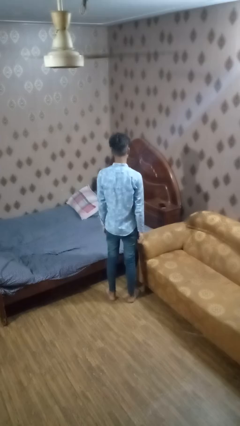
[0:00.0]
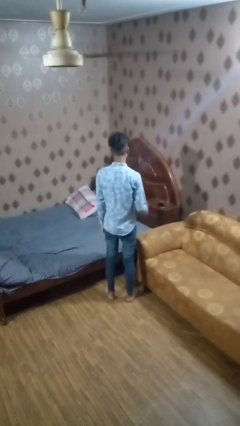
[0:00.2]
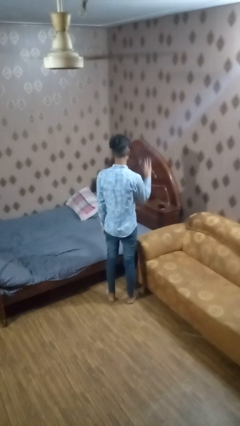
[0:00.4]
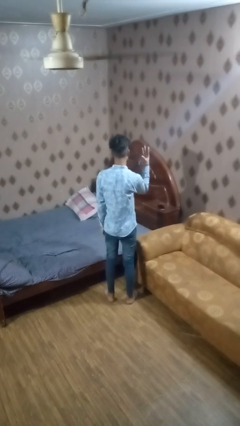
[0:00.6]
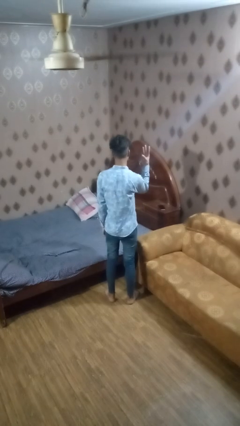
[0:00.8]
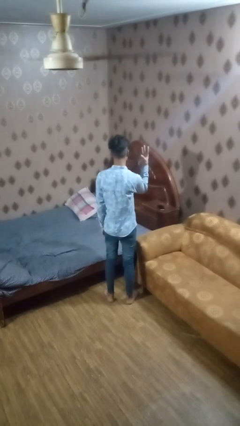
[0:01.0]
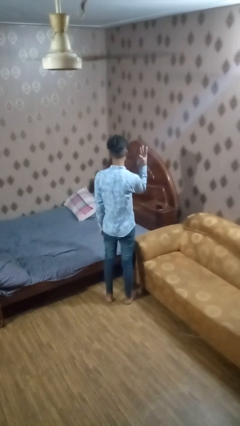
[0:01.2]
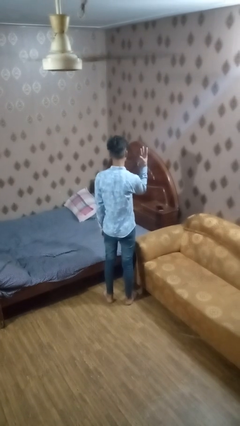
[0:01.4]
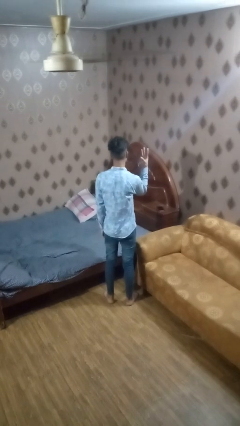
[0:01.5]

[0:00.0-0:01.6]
person gestures number three

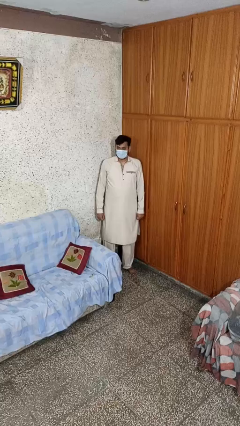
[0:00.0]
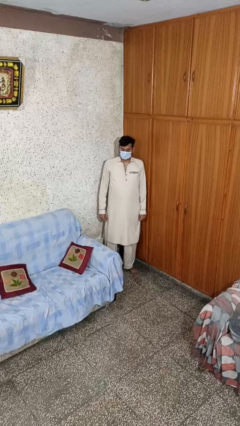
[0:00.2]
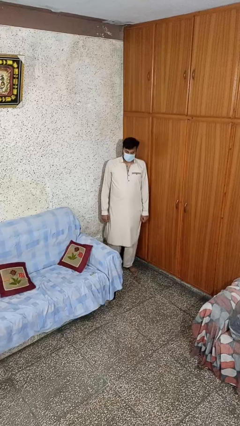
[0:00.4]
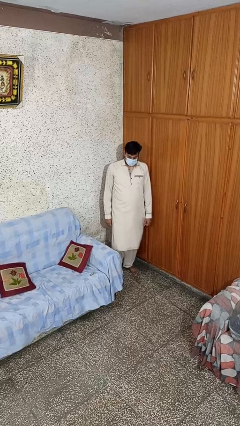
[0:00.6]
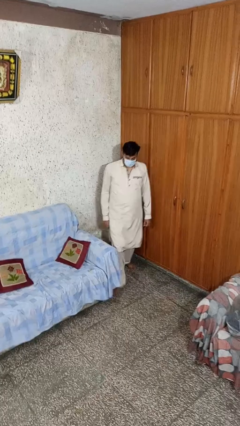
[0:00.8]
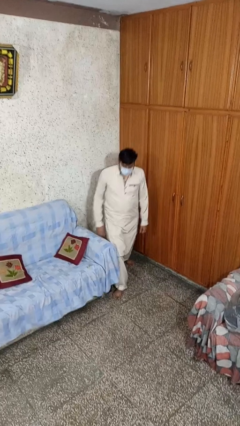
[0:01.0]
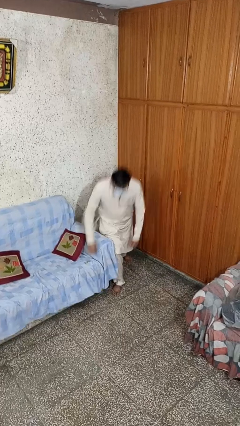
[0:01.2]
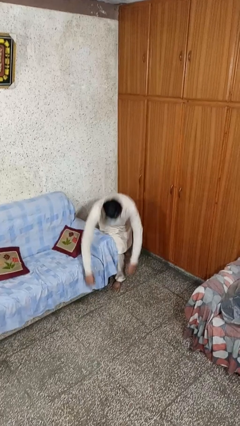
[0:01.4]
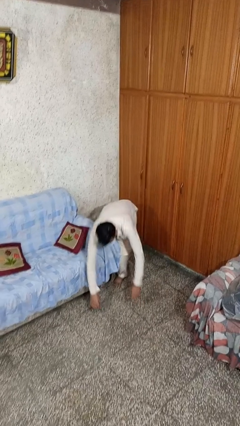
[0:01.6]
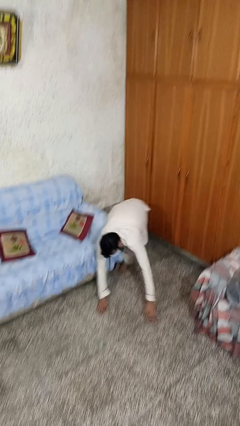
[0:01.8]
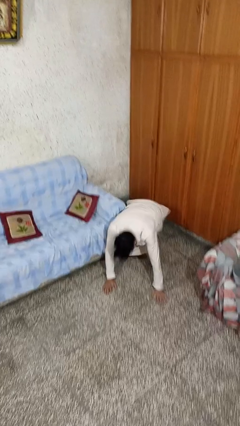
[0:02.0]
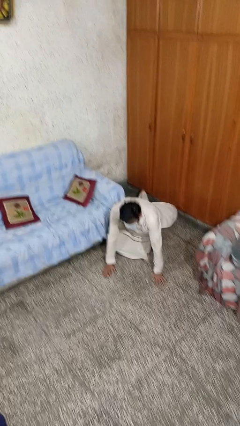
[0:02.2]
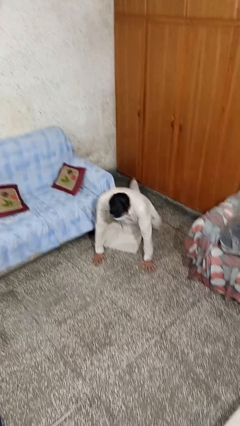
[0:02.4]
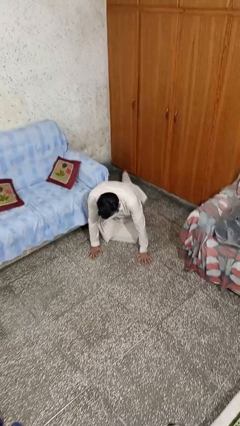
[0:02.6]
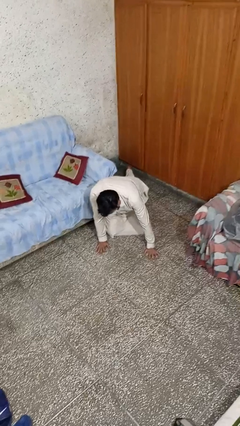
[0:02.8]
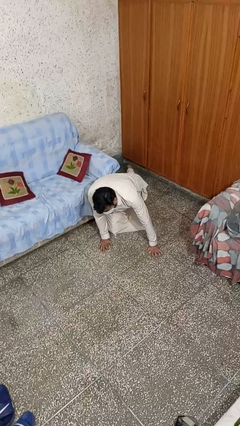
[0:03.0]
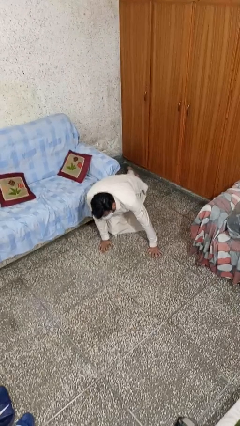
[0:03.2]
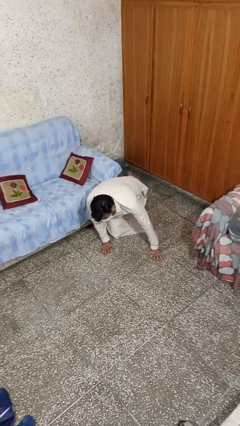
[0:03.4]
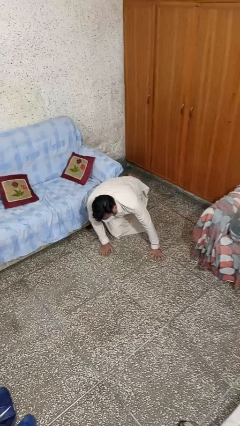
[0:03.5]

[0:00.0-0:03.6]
person trips on object on floor

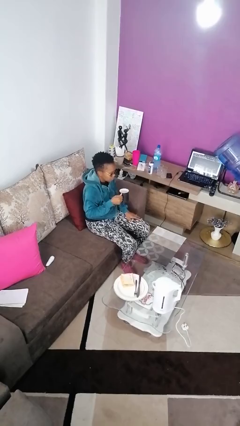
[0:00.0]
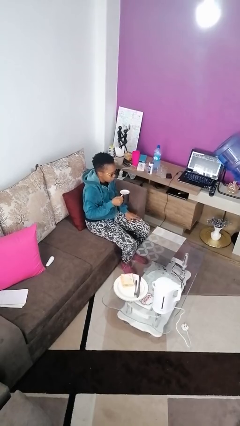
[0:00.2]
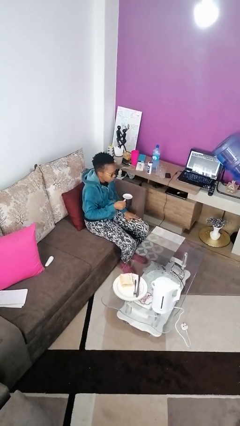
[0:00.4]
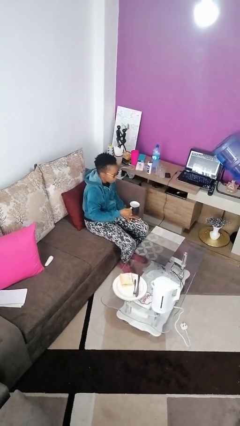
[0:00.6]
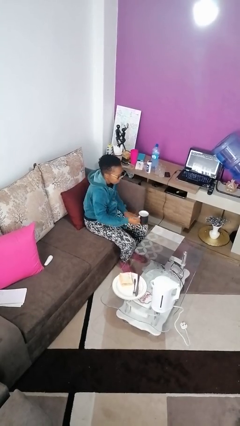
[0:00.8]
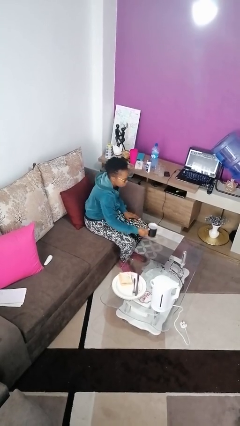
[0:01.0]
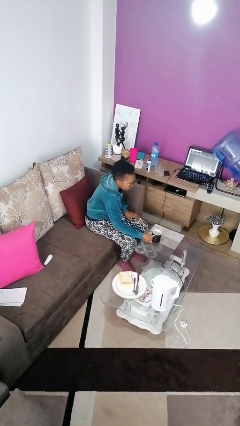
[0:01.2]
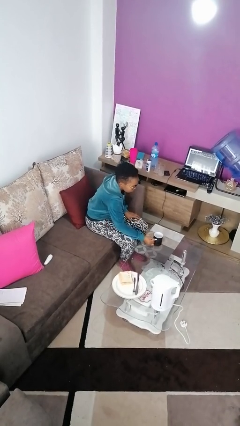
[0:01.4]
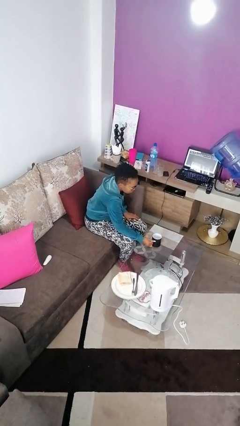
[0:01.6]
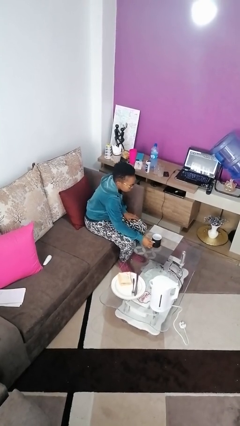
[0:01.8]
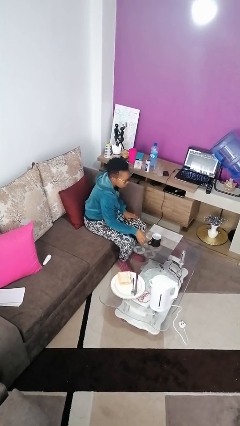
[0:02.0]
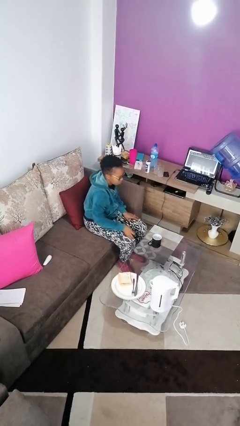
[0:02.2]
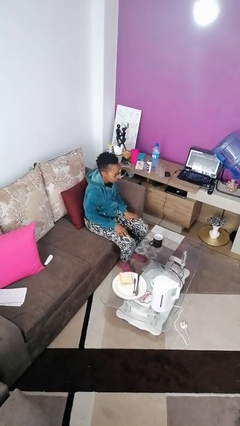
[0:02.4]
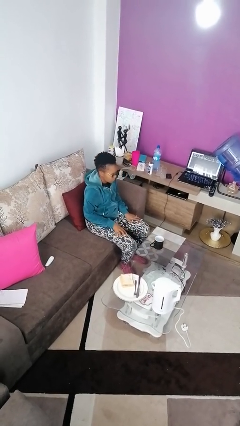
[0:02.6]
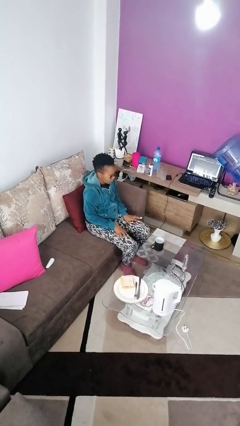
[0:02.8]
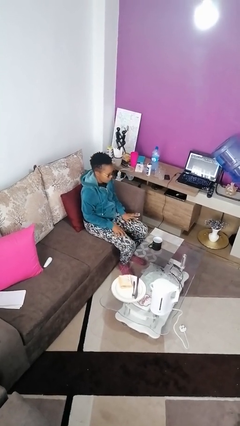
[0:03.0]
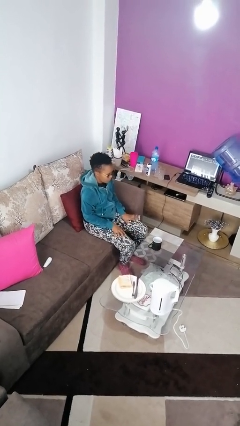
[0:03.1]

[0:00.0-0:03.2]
person puts down object on table

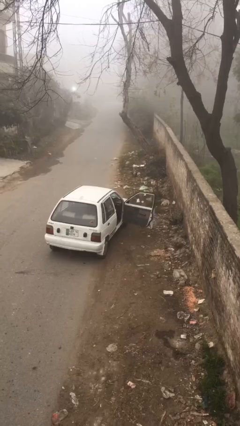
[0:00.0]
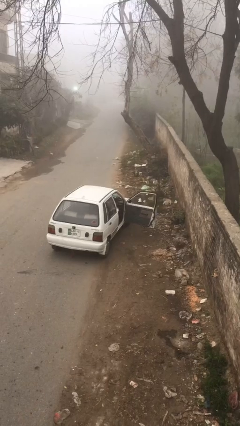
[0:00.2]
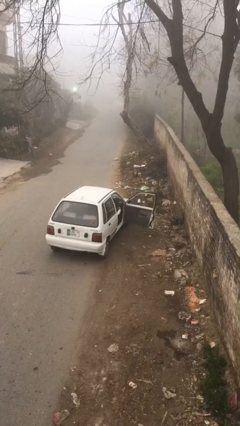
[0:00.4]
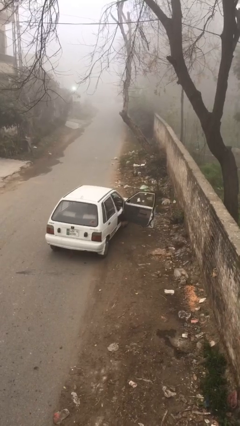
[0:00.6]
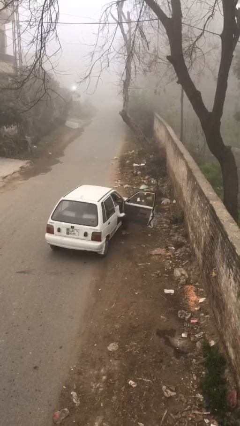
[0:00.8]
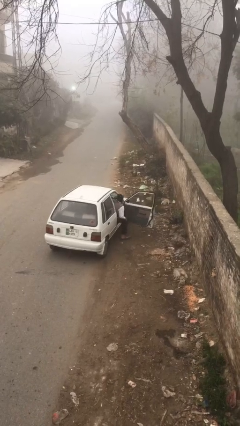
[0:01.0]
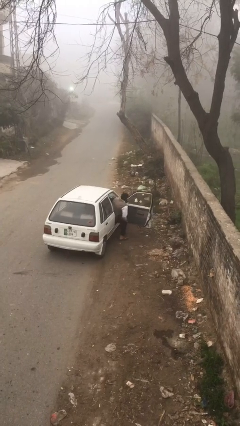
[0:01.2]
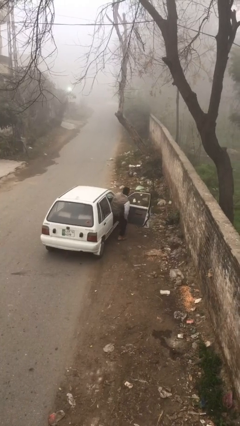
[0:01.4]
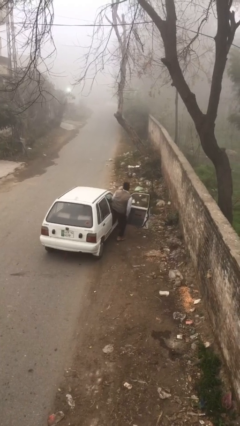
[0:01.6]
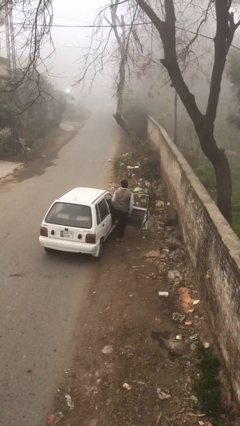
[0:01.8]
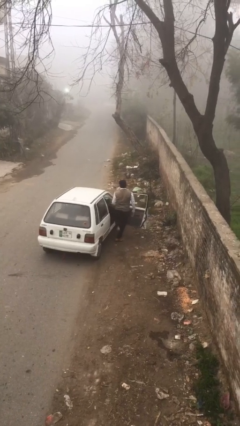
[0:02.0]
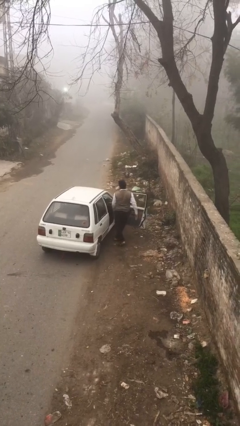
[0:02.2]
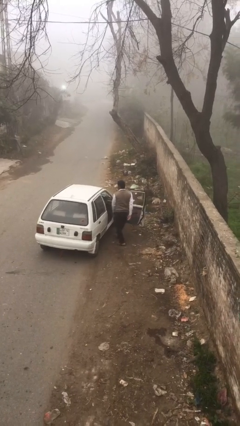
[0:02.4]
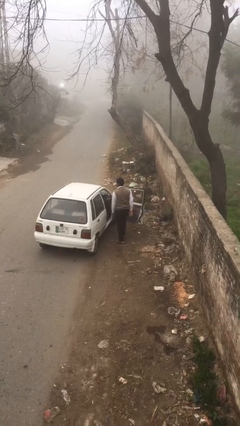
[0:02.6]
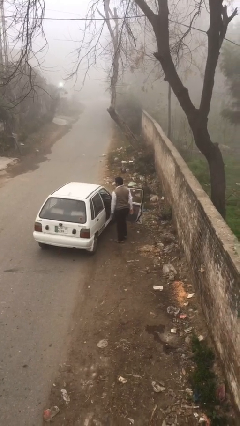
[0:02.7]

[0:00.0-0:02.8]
person exits car

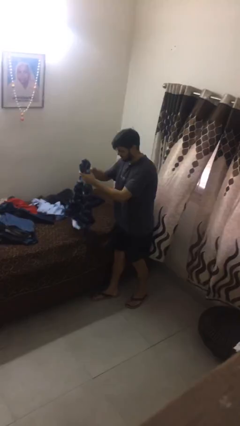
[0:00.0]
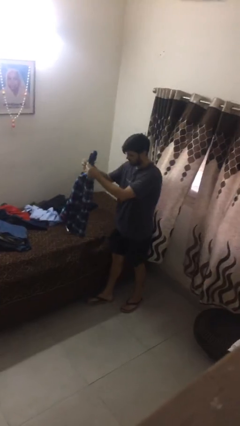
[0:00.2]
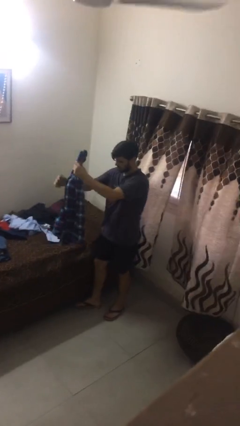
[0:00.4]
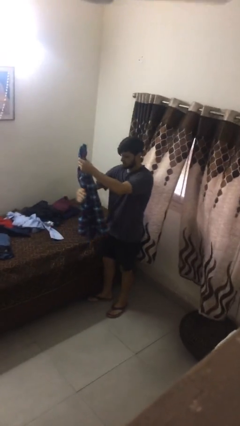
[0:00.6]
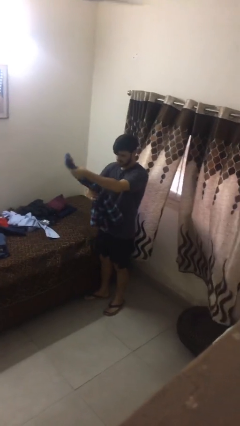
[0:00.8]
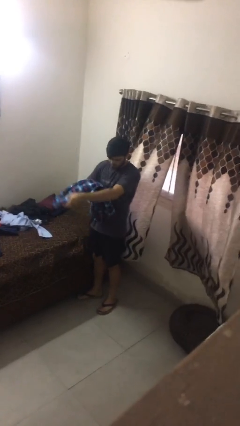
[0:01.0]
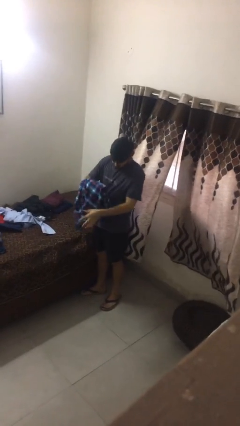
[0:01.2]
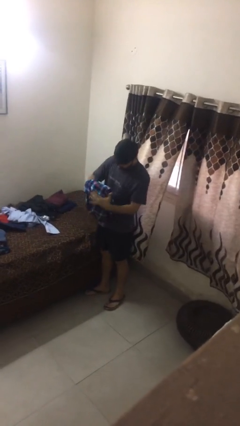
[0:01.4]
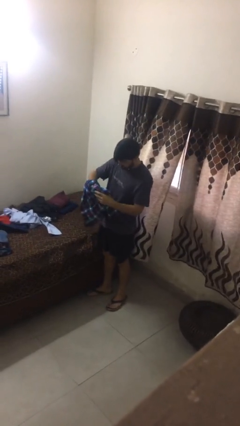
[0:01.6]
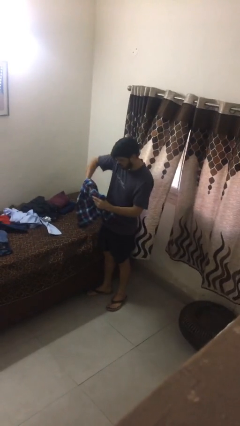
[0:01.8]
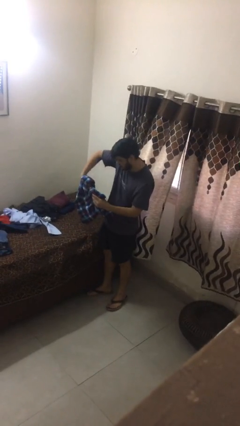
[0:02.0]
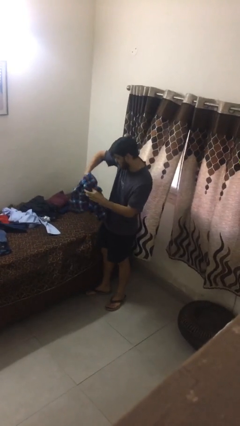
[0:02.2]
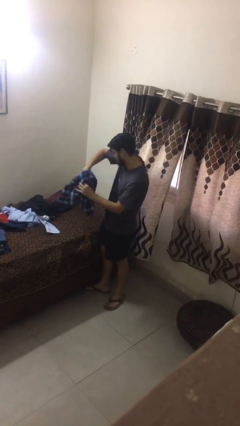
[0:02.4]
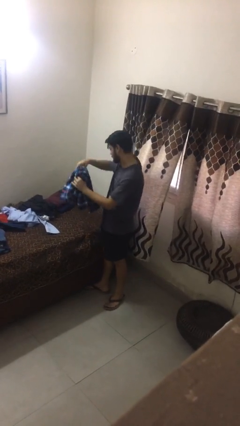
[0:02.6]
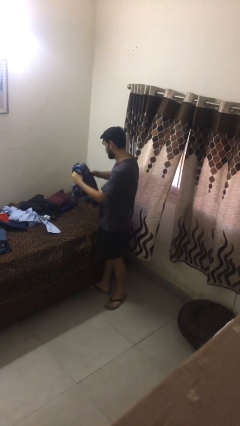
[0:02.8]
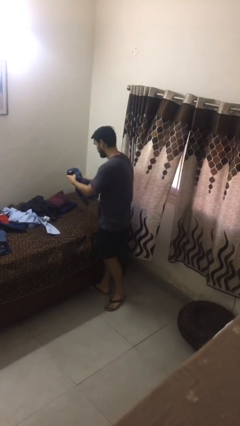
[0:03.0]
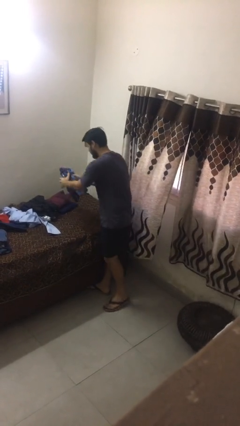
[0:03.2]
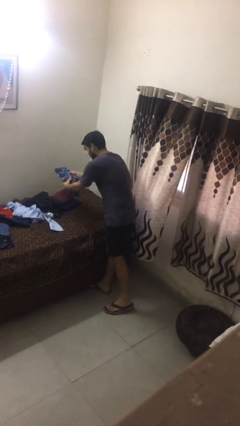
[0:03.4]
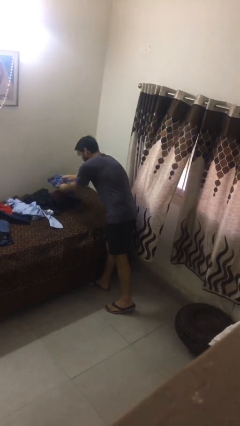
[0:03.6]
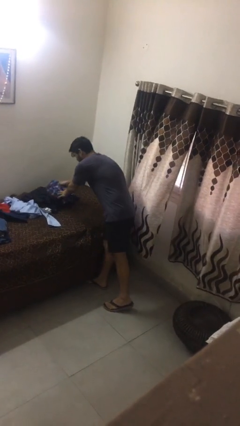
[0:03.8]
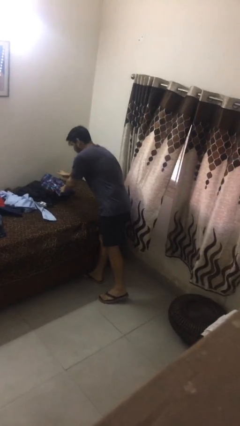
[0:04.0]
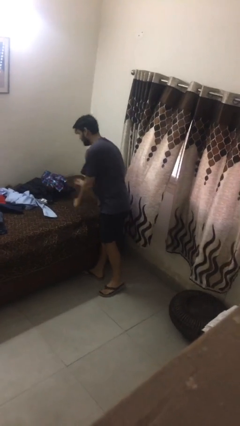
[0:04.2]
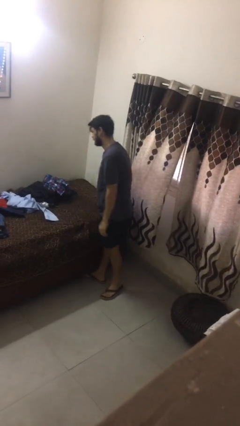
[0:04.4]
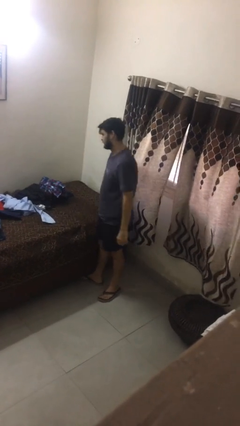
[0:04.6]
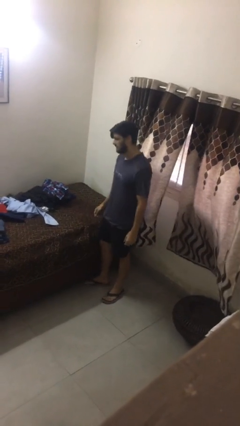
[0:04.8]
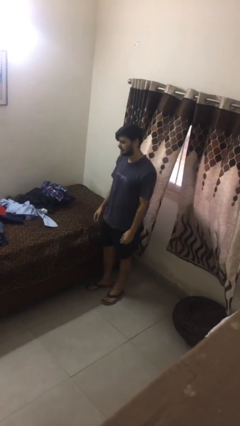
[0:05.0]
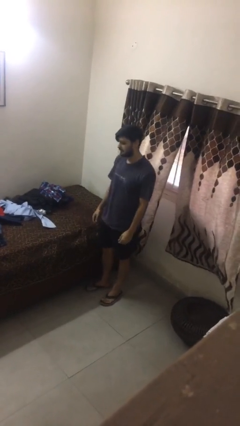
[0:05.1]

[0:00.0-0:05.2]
person folds shirt

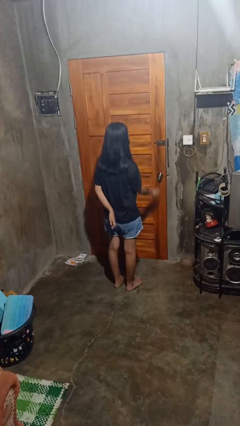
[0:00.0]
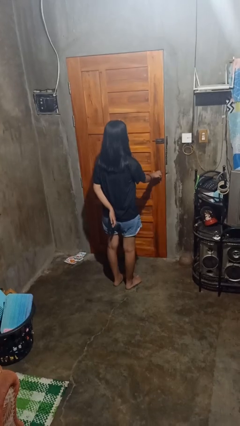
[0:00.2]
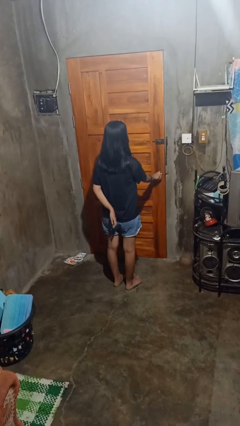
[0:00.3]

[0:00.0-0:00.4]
person opens facility door

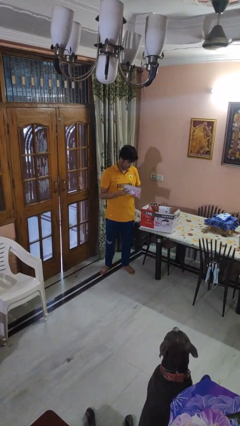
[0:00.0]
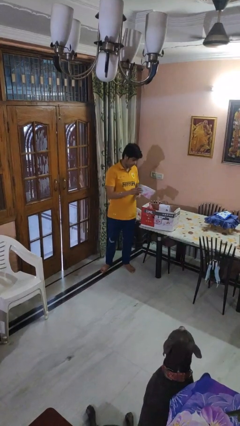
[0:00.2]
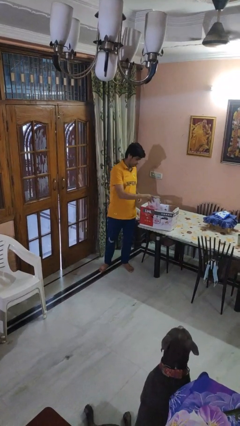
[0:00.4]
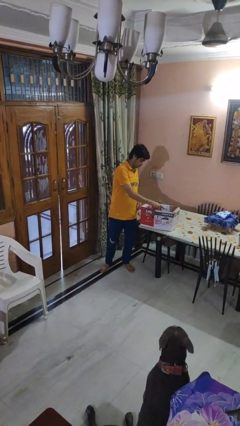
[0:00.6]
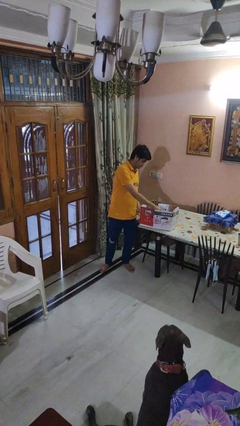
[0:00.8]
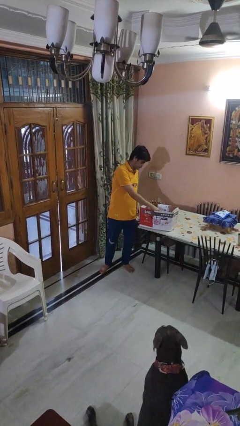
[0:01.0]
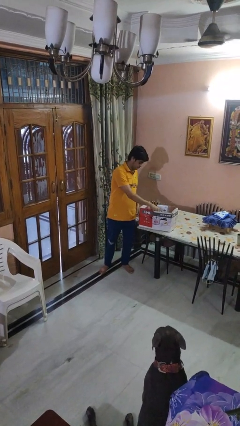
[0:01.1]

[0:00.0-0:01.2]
person puts object into box
